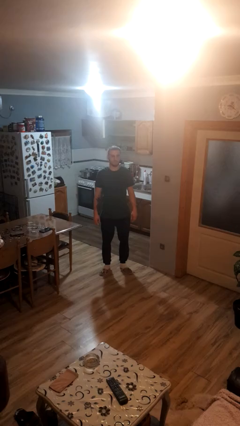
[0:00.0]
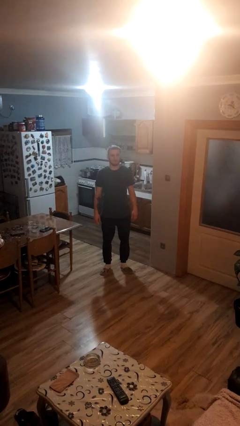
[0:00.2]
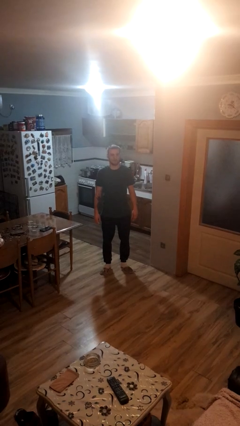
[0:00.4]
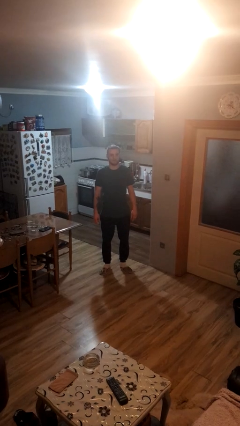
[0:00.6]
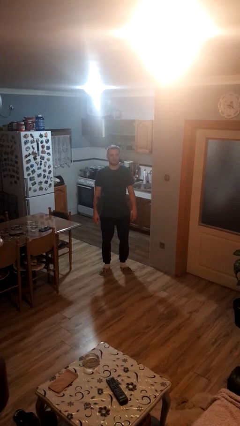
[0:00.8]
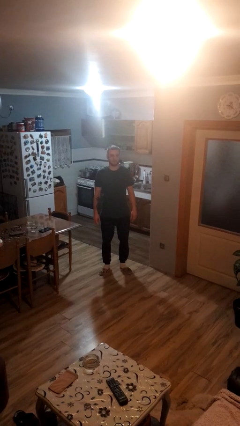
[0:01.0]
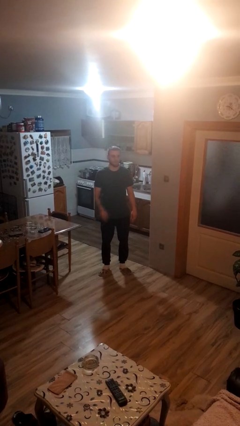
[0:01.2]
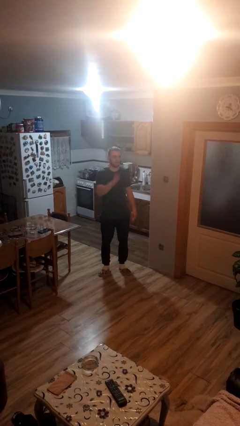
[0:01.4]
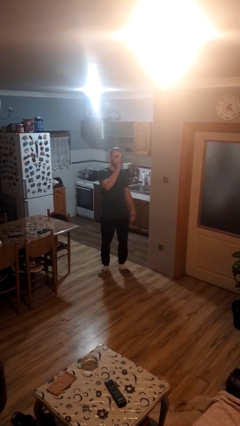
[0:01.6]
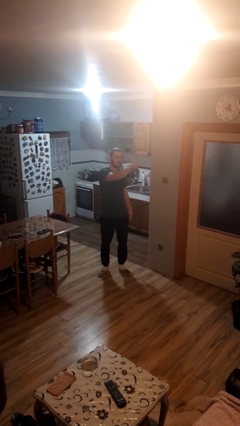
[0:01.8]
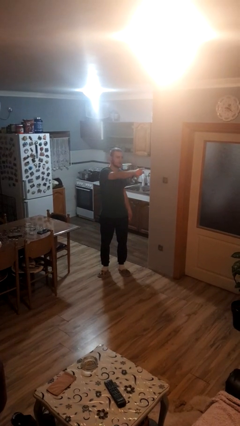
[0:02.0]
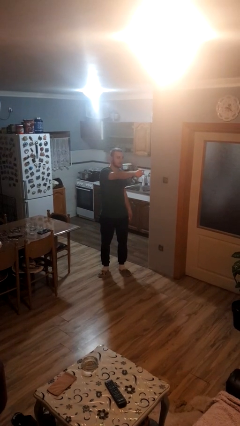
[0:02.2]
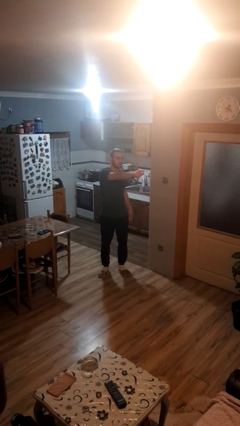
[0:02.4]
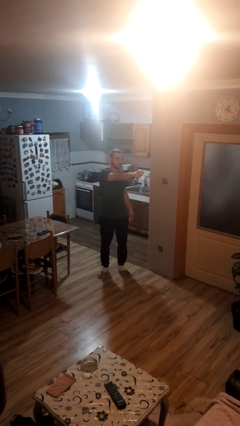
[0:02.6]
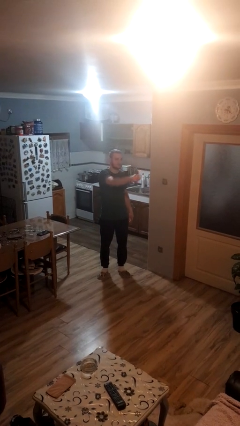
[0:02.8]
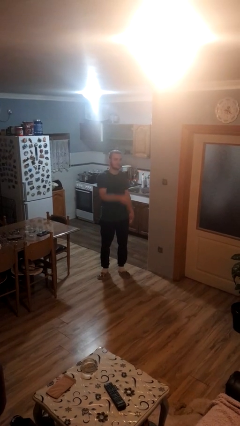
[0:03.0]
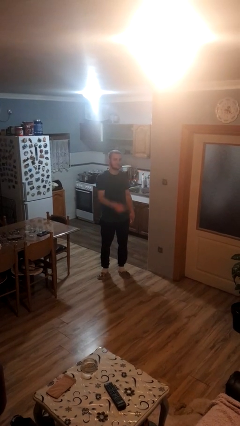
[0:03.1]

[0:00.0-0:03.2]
person points at person

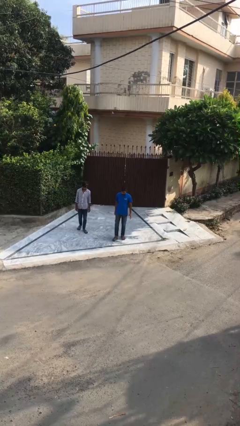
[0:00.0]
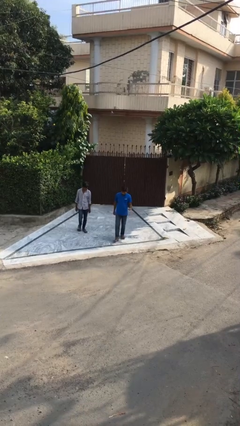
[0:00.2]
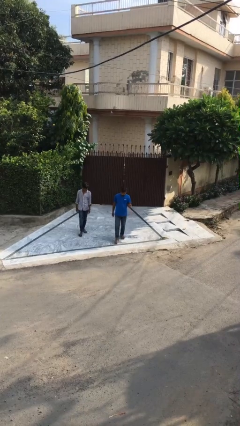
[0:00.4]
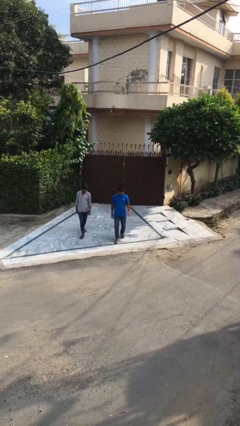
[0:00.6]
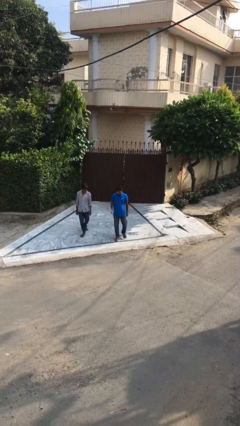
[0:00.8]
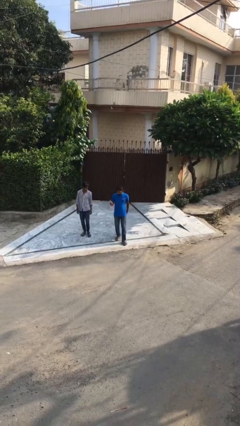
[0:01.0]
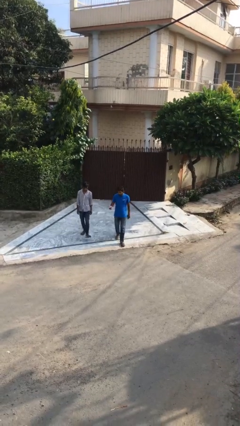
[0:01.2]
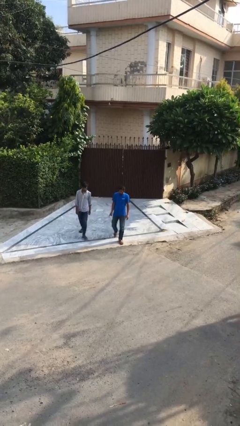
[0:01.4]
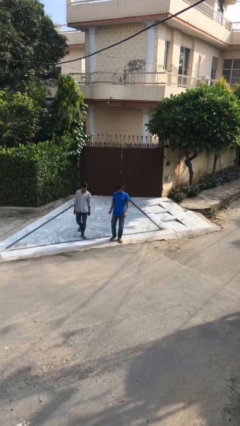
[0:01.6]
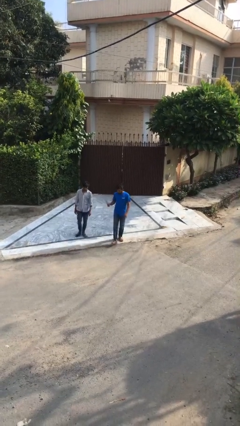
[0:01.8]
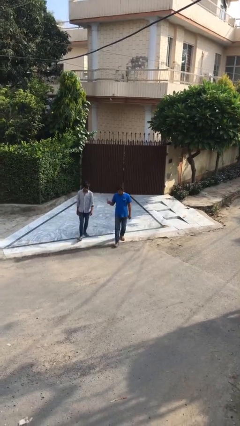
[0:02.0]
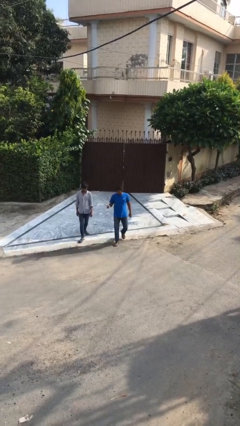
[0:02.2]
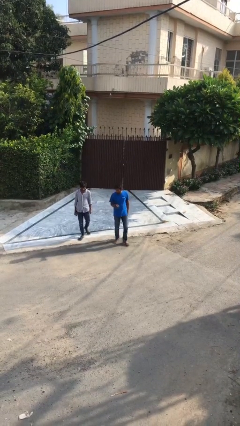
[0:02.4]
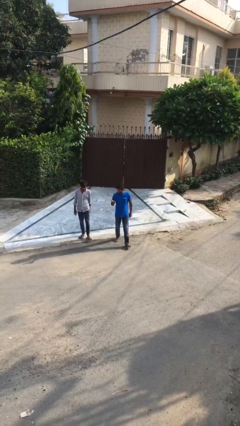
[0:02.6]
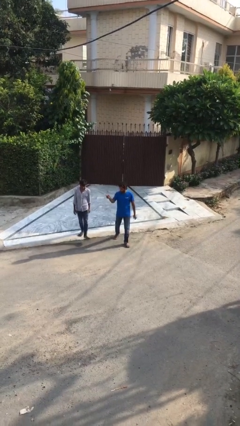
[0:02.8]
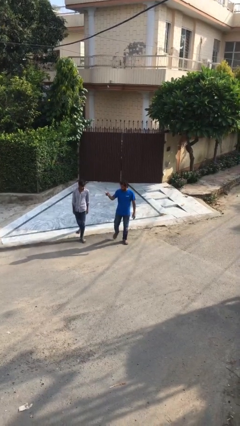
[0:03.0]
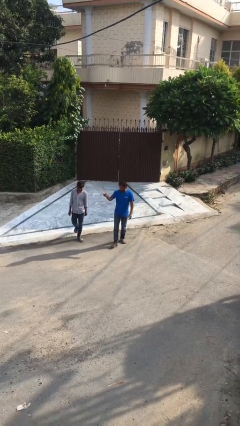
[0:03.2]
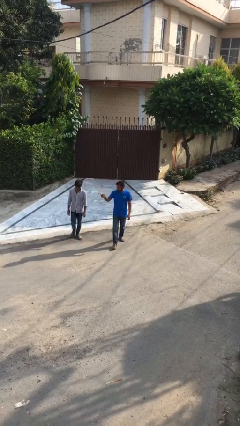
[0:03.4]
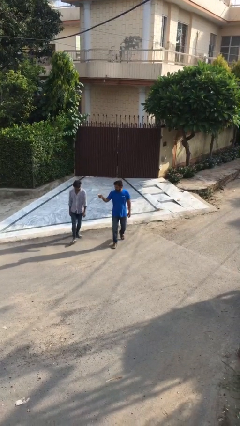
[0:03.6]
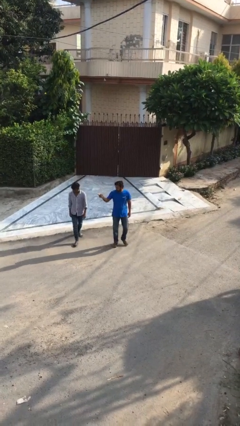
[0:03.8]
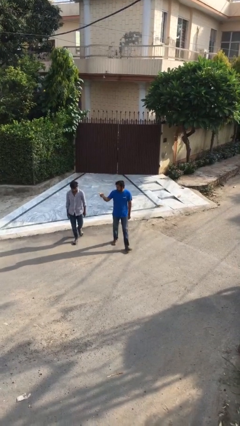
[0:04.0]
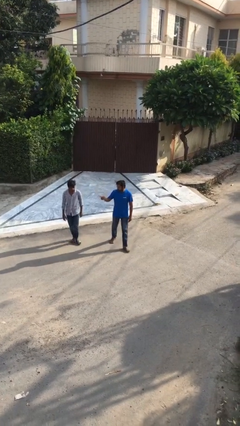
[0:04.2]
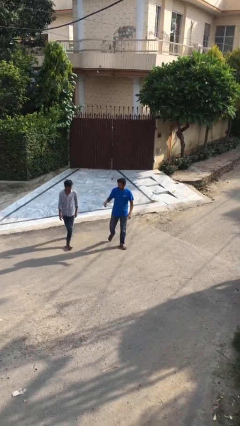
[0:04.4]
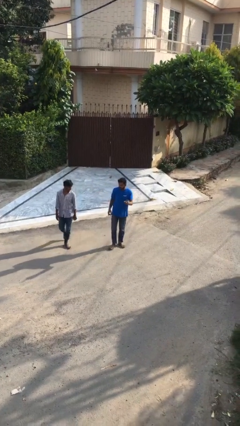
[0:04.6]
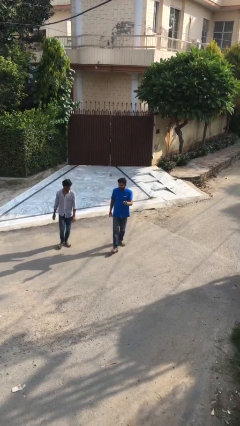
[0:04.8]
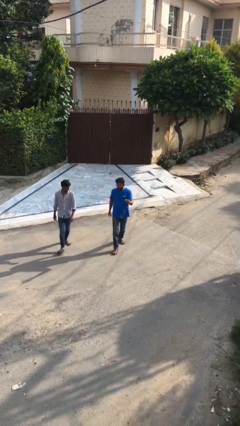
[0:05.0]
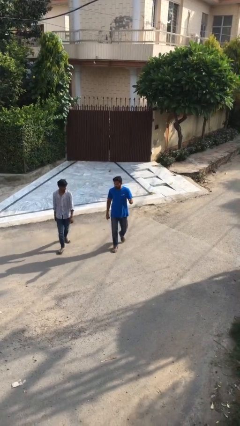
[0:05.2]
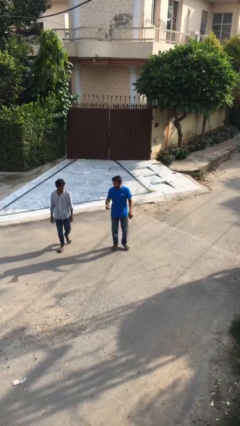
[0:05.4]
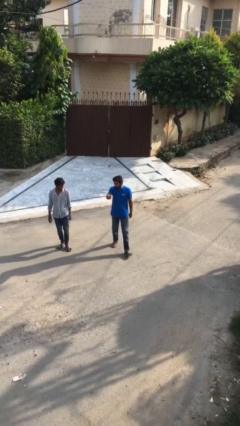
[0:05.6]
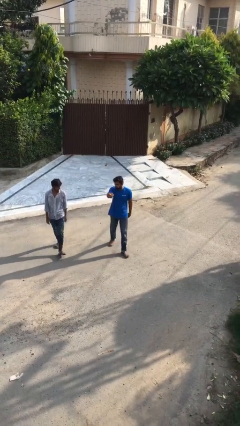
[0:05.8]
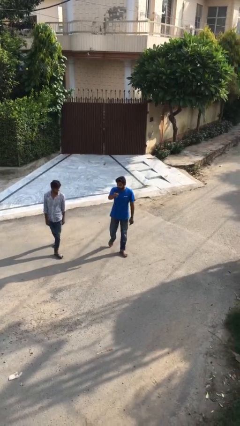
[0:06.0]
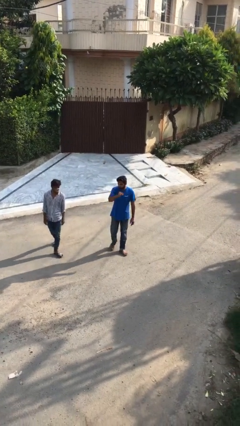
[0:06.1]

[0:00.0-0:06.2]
person talks to person

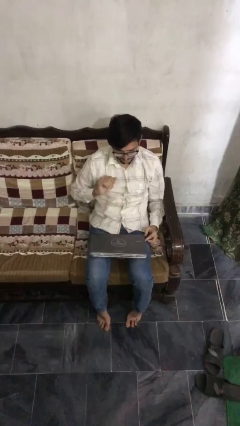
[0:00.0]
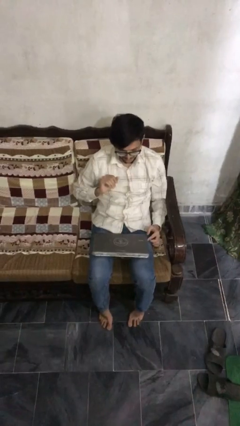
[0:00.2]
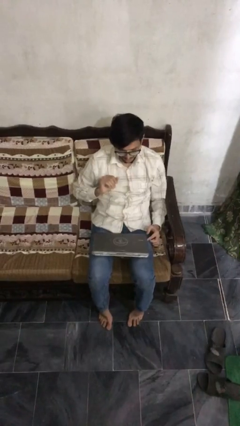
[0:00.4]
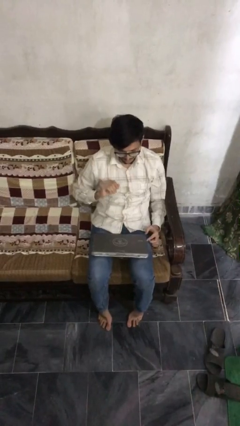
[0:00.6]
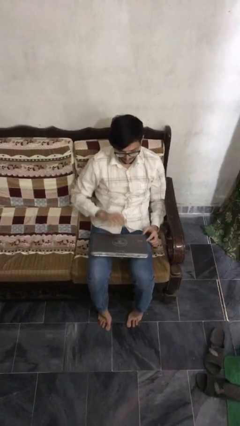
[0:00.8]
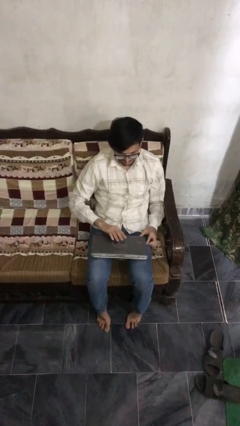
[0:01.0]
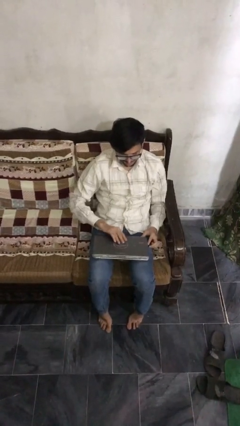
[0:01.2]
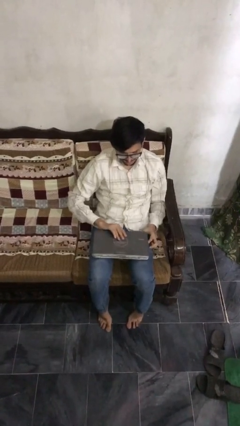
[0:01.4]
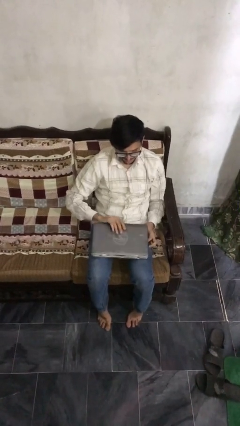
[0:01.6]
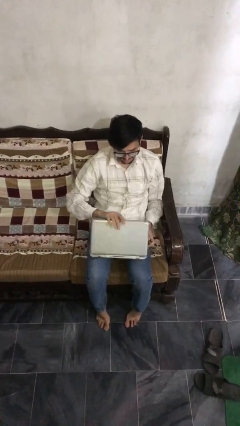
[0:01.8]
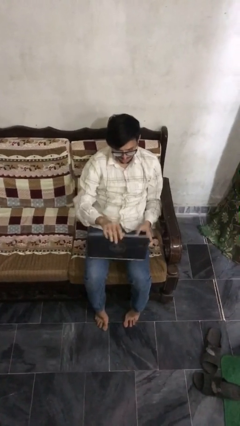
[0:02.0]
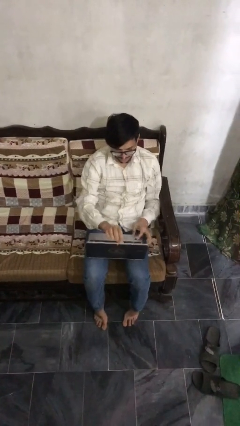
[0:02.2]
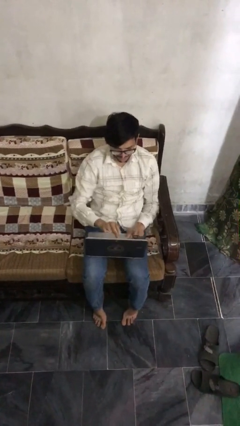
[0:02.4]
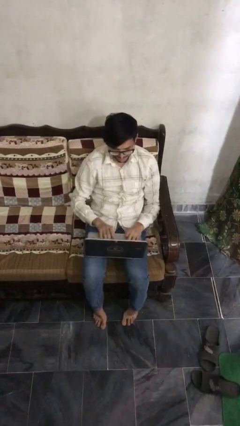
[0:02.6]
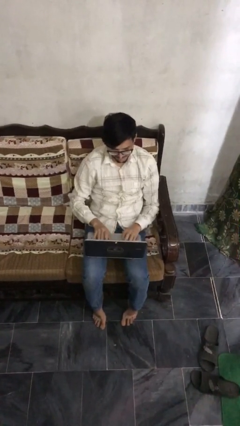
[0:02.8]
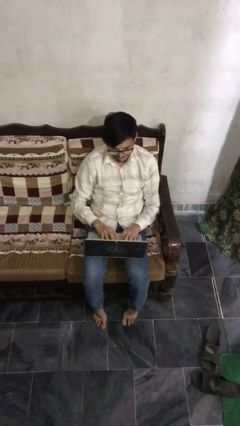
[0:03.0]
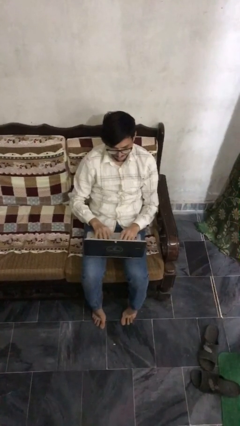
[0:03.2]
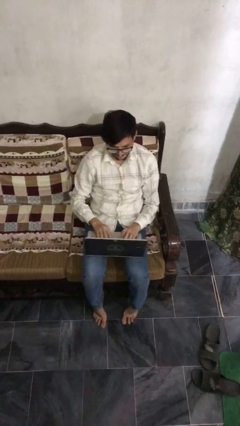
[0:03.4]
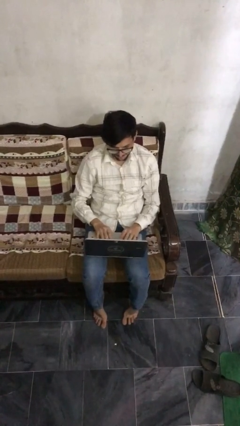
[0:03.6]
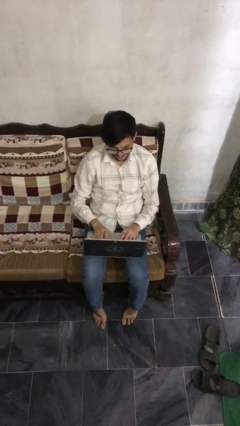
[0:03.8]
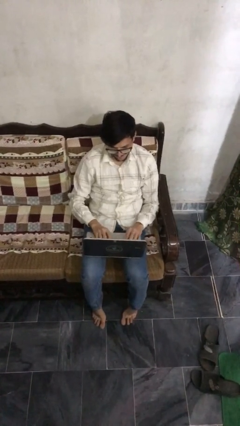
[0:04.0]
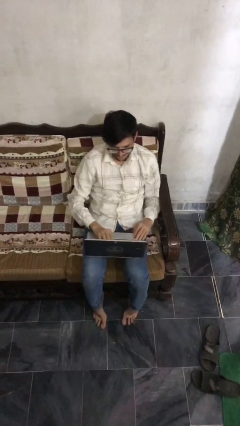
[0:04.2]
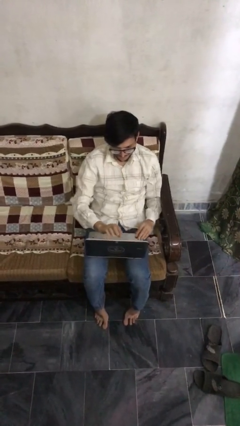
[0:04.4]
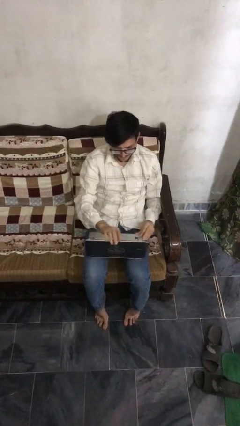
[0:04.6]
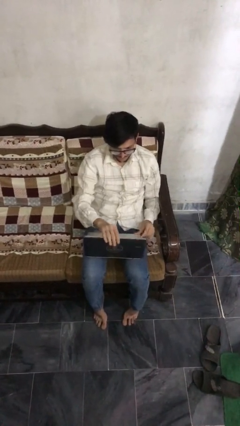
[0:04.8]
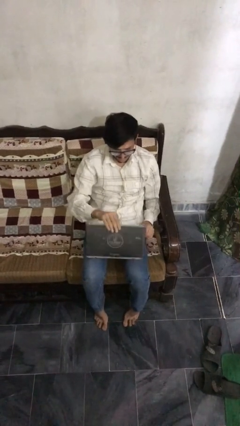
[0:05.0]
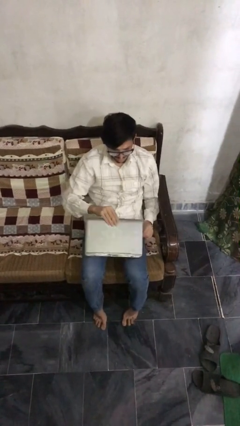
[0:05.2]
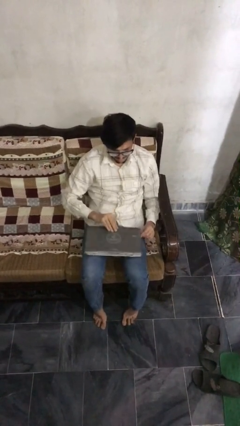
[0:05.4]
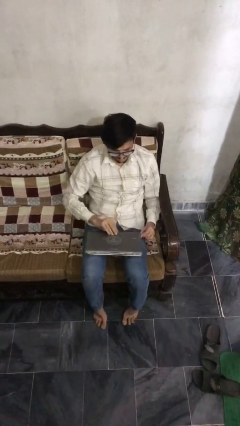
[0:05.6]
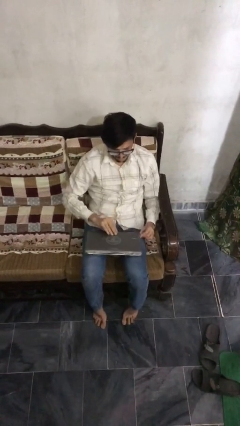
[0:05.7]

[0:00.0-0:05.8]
person interacts with laptop

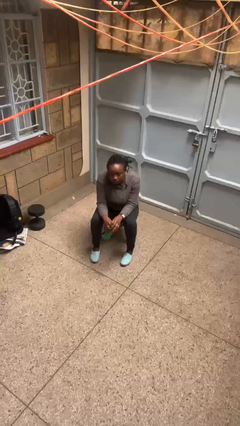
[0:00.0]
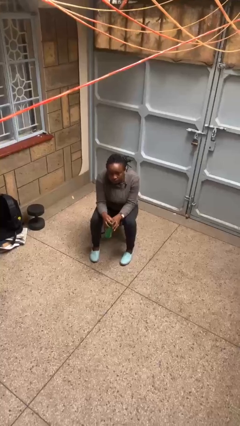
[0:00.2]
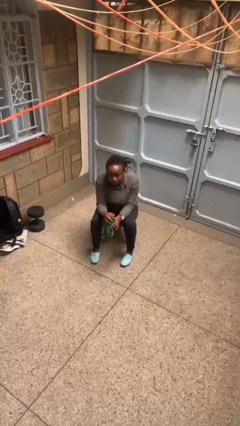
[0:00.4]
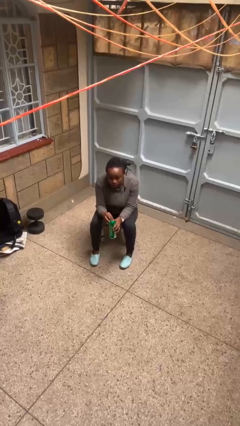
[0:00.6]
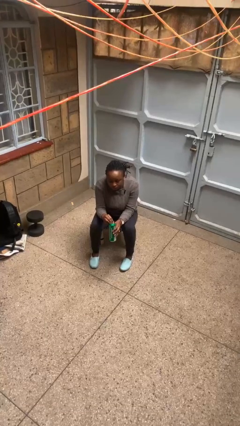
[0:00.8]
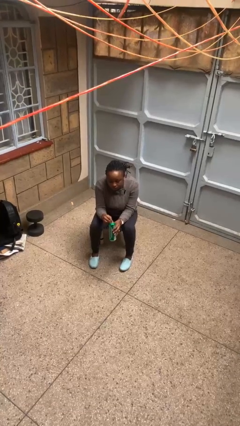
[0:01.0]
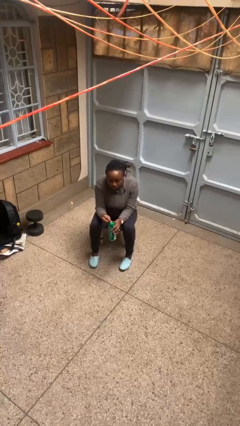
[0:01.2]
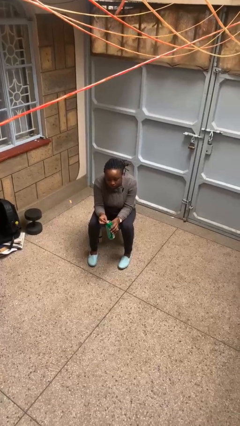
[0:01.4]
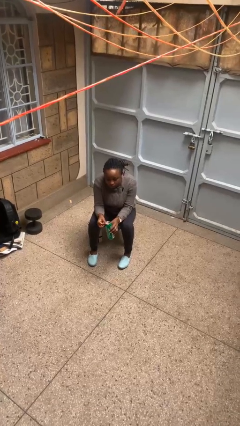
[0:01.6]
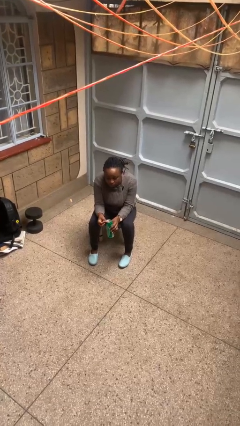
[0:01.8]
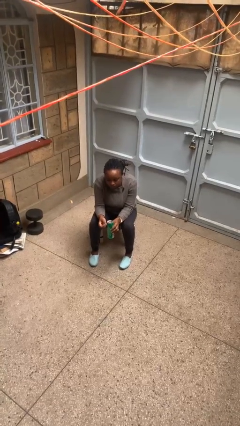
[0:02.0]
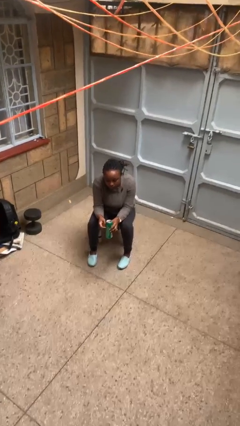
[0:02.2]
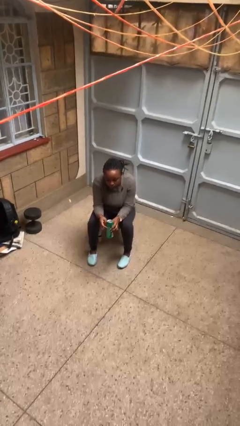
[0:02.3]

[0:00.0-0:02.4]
person opens beverage can
